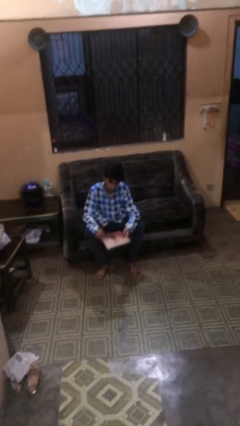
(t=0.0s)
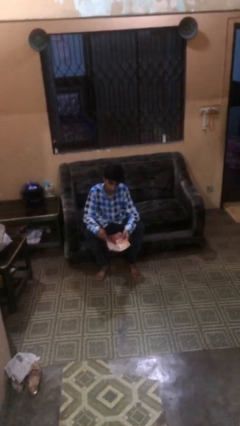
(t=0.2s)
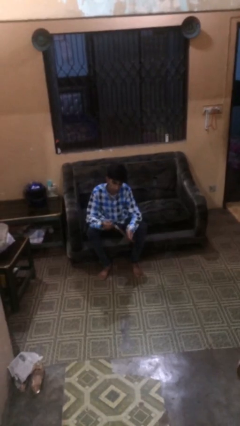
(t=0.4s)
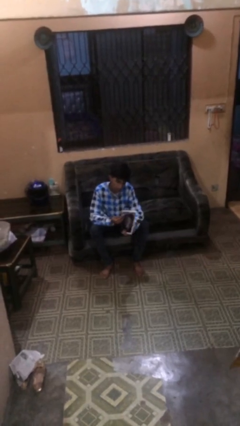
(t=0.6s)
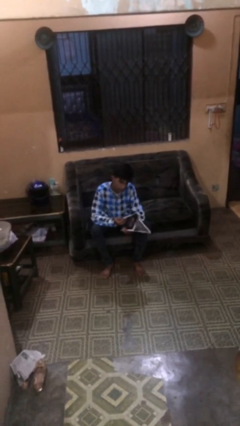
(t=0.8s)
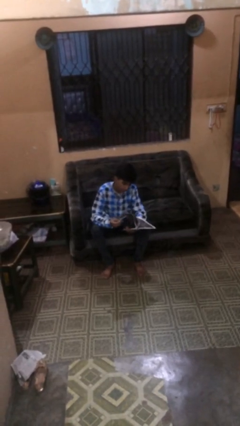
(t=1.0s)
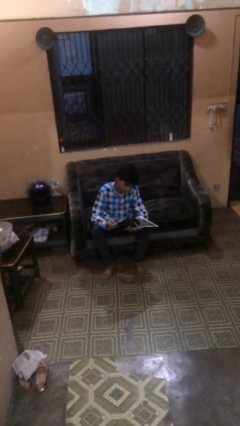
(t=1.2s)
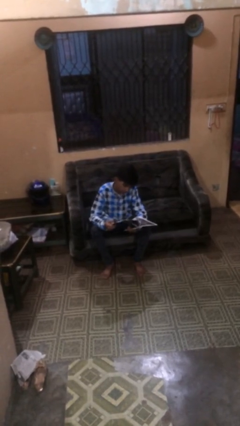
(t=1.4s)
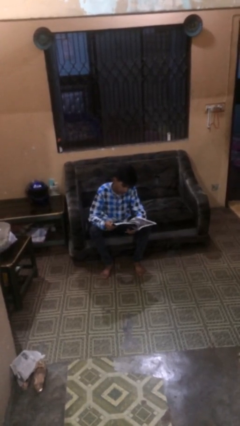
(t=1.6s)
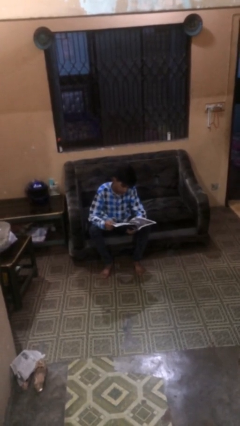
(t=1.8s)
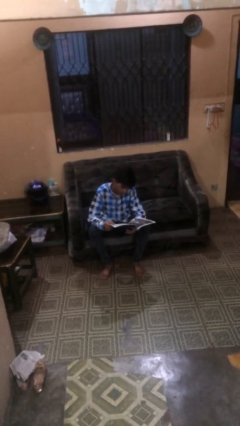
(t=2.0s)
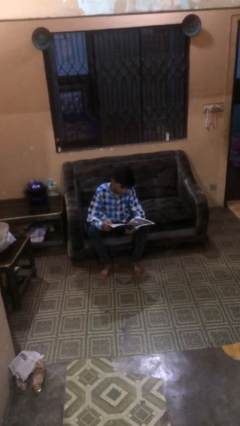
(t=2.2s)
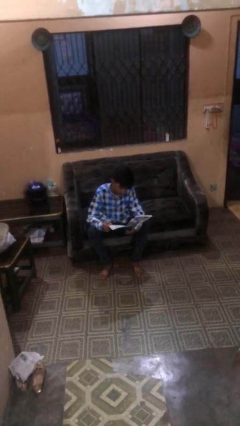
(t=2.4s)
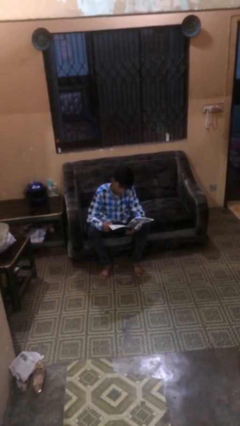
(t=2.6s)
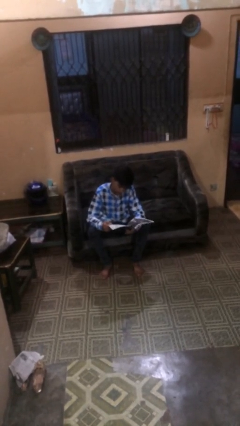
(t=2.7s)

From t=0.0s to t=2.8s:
person reads document

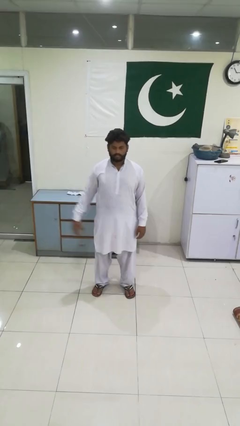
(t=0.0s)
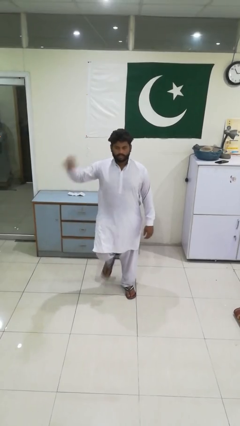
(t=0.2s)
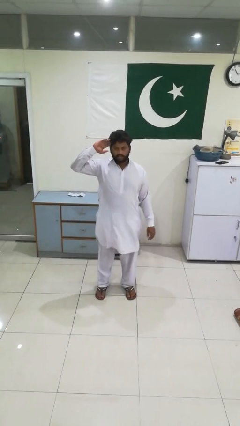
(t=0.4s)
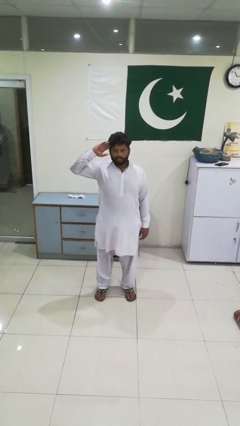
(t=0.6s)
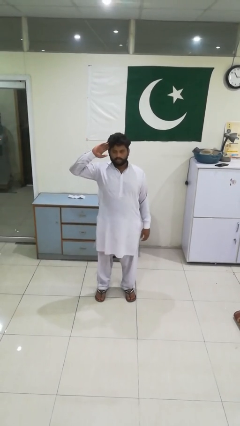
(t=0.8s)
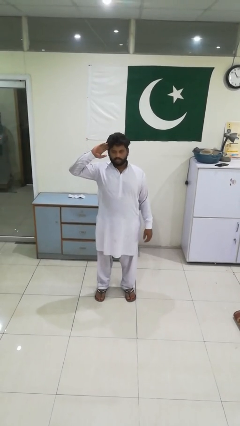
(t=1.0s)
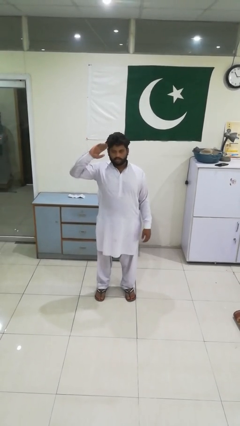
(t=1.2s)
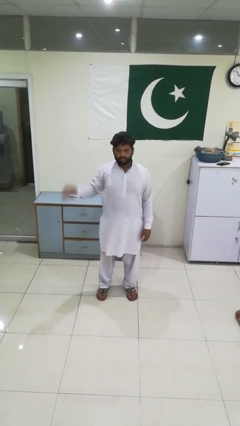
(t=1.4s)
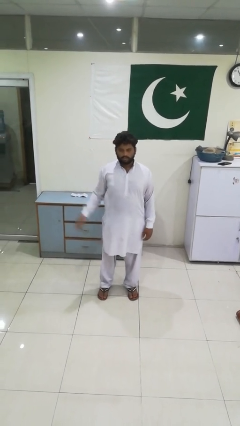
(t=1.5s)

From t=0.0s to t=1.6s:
person salutes

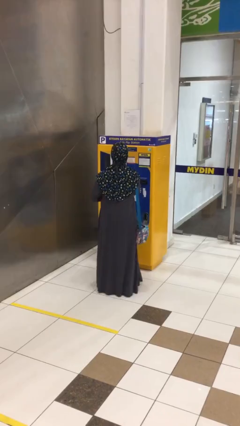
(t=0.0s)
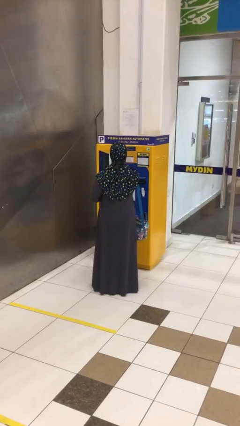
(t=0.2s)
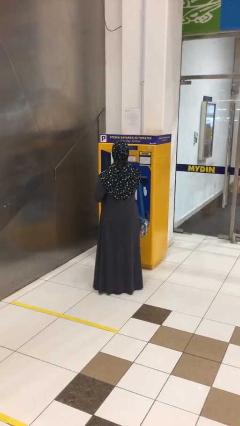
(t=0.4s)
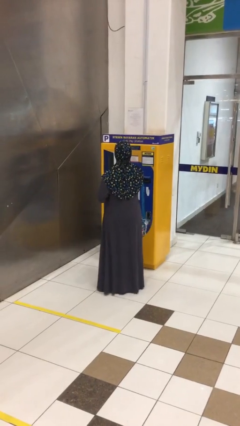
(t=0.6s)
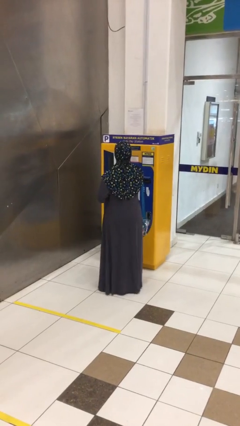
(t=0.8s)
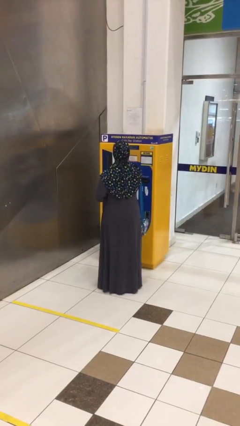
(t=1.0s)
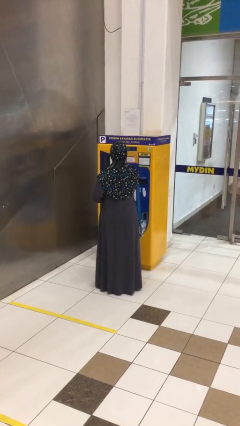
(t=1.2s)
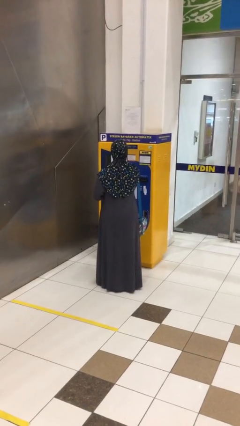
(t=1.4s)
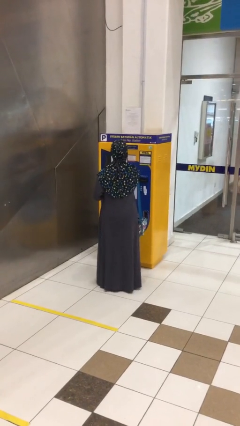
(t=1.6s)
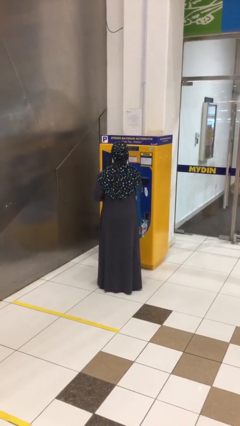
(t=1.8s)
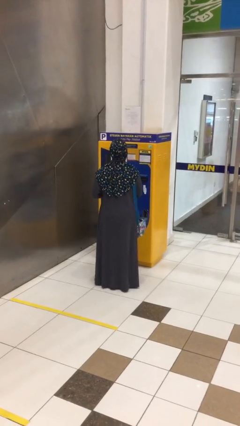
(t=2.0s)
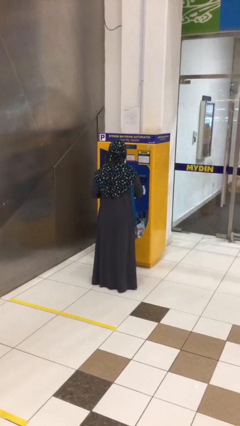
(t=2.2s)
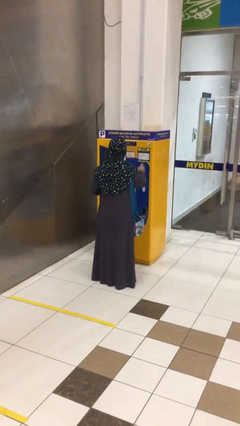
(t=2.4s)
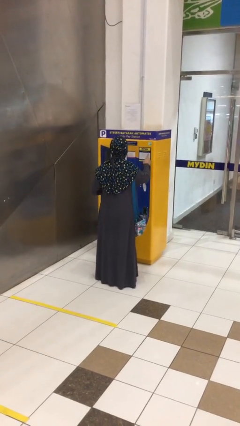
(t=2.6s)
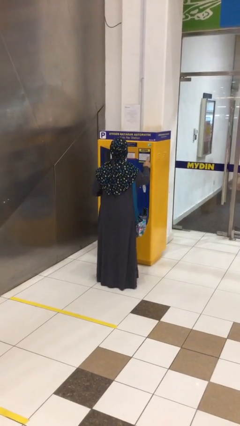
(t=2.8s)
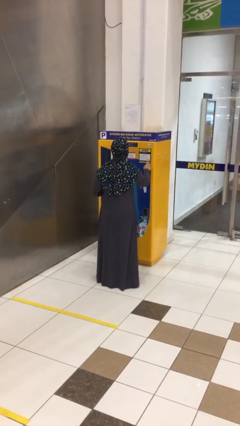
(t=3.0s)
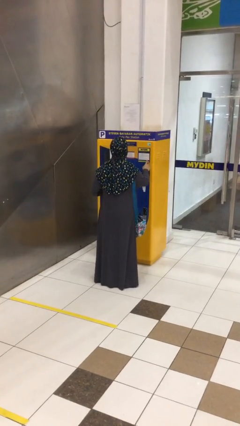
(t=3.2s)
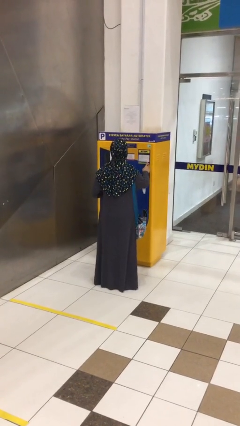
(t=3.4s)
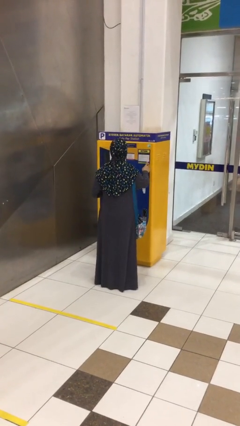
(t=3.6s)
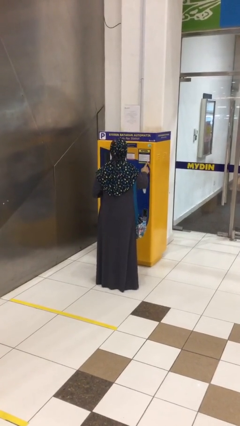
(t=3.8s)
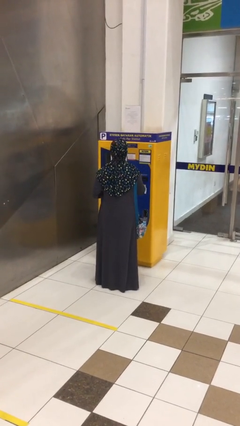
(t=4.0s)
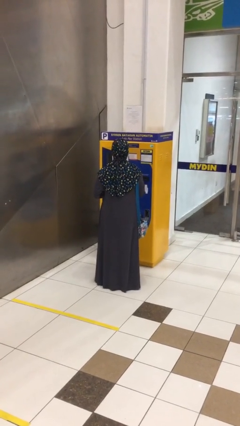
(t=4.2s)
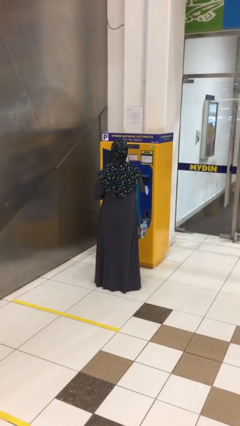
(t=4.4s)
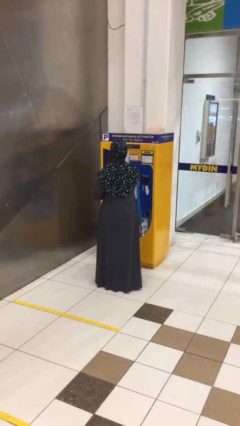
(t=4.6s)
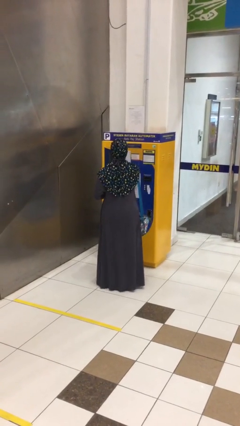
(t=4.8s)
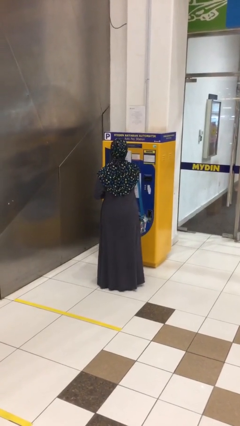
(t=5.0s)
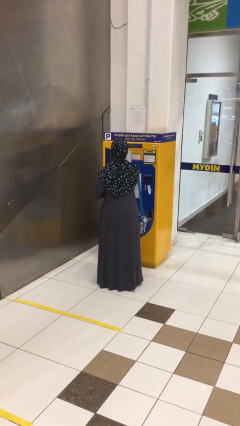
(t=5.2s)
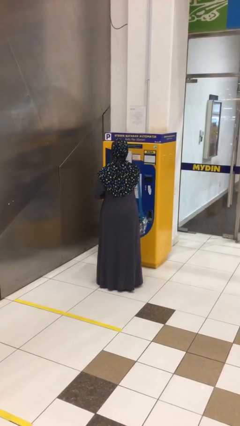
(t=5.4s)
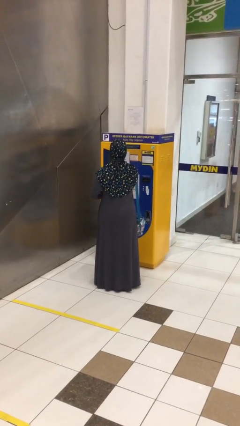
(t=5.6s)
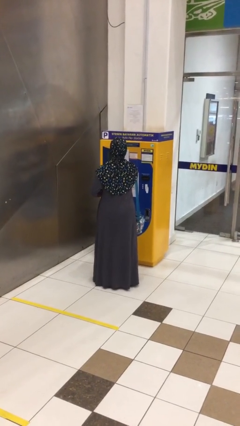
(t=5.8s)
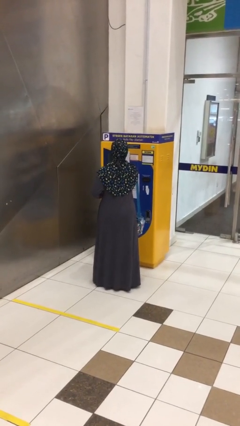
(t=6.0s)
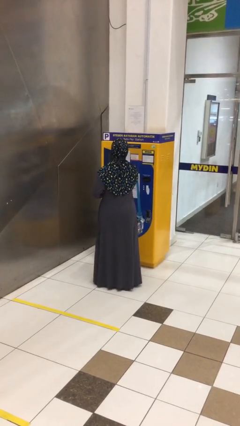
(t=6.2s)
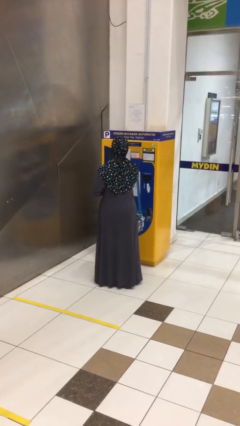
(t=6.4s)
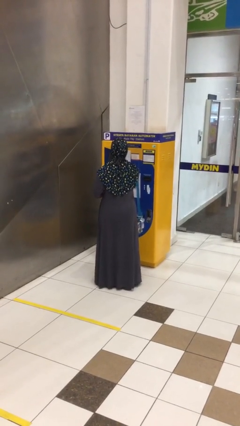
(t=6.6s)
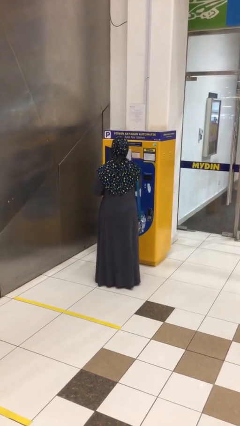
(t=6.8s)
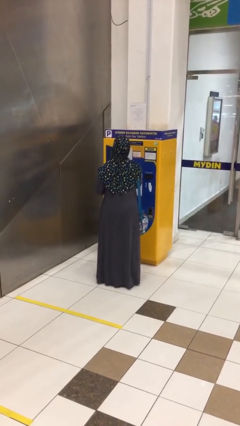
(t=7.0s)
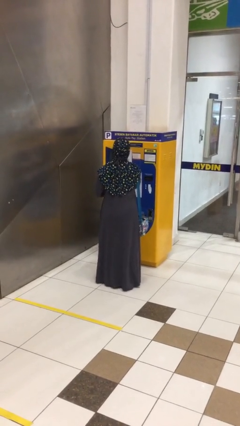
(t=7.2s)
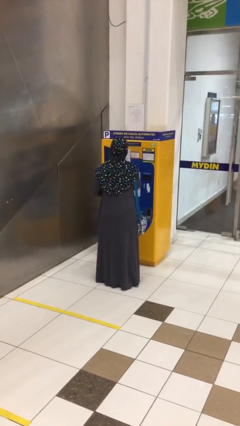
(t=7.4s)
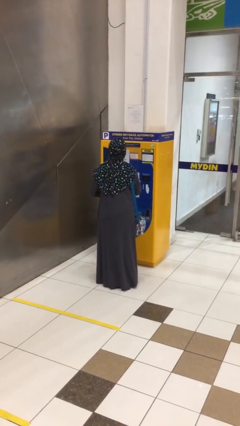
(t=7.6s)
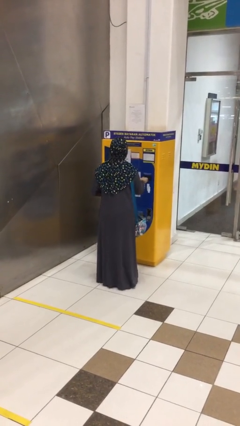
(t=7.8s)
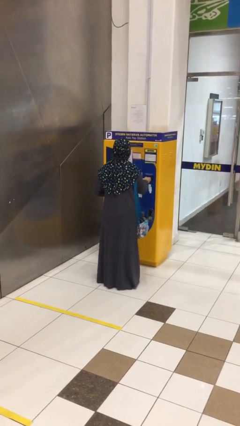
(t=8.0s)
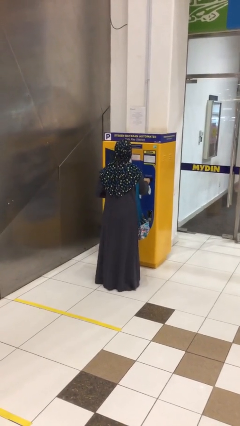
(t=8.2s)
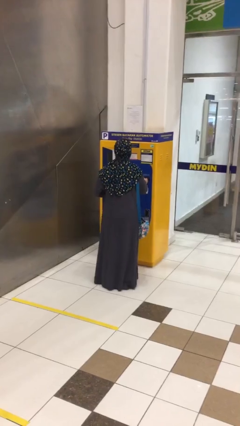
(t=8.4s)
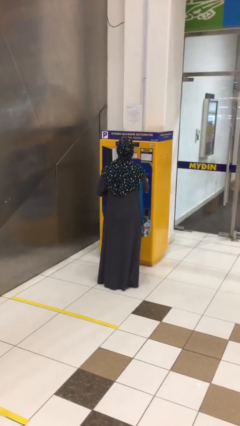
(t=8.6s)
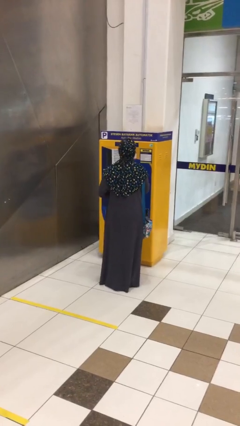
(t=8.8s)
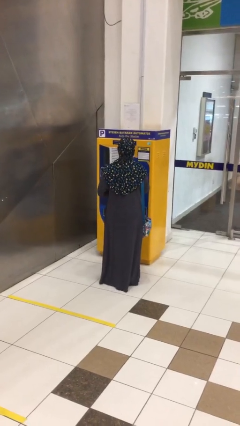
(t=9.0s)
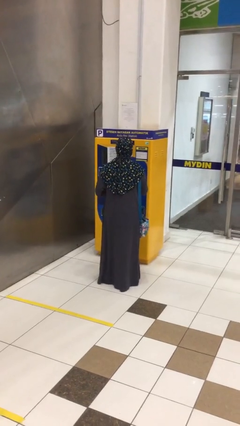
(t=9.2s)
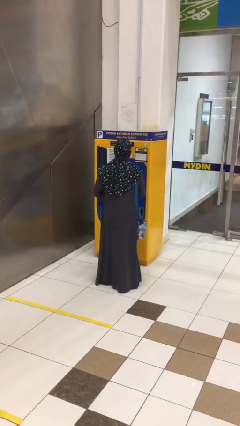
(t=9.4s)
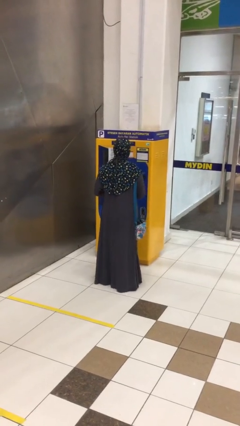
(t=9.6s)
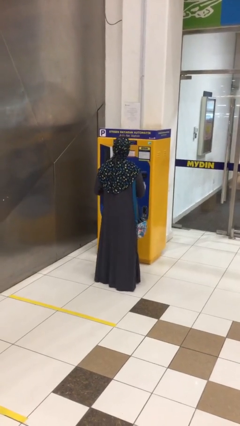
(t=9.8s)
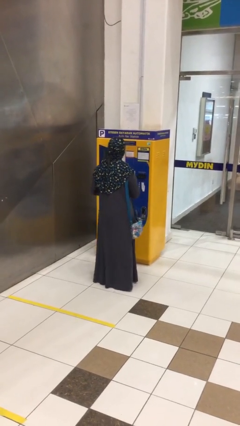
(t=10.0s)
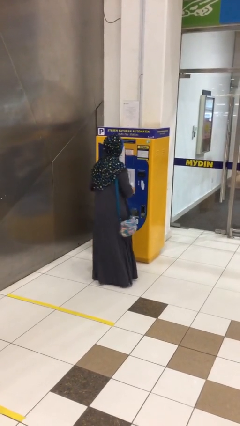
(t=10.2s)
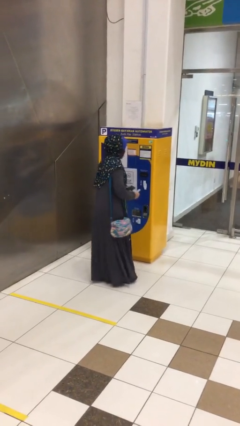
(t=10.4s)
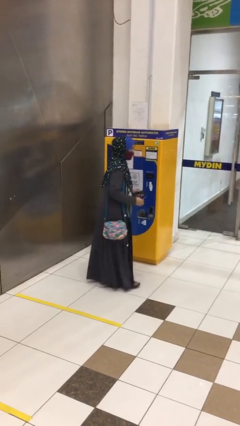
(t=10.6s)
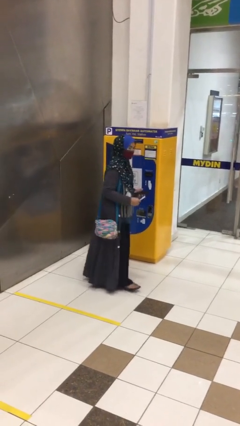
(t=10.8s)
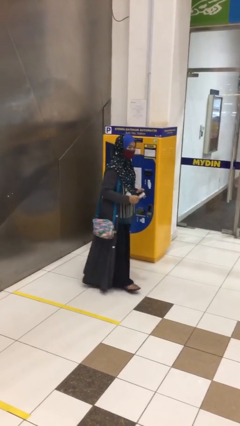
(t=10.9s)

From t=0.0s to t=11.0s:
person purchases from machine

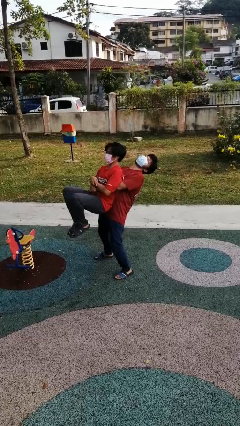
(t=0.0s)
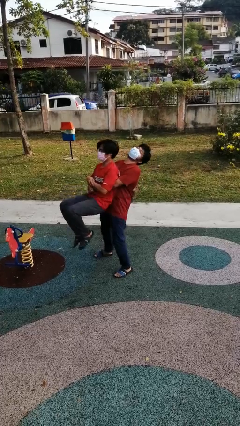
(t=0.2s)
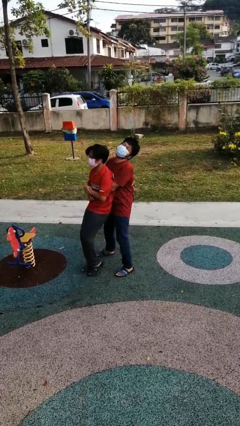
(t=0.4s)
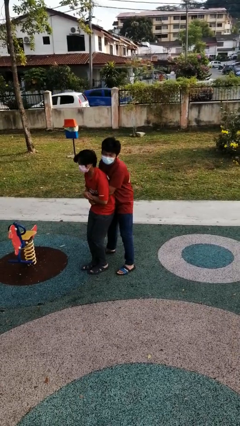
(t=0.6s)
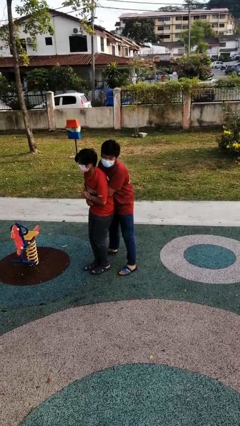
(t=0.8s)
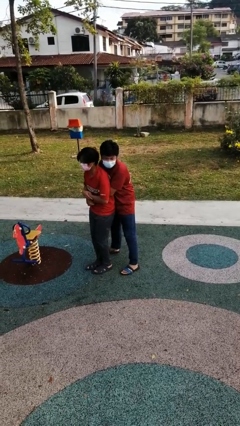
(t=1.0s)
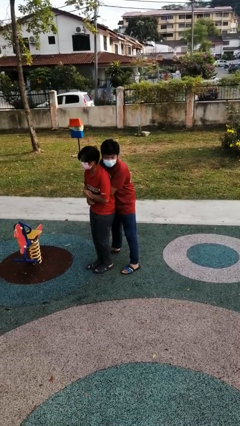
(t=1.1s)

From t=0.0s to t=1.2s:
person puts down person

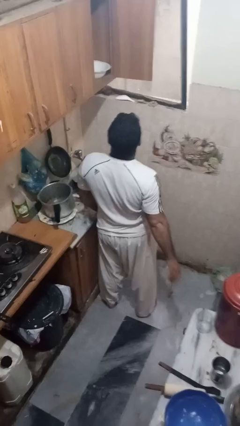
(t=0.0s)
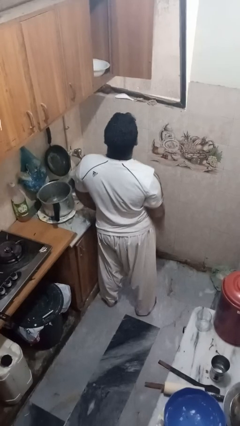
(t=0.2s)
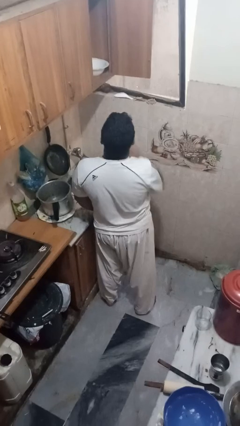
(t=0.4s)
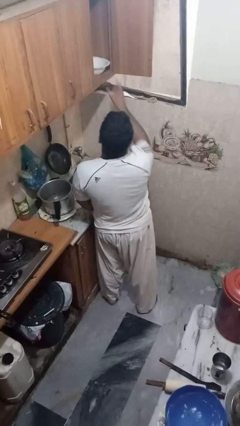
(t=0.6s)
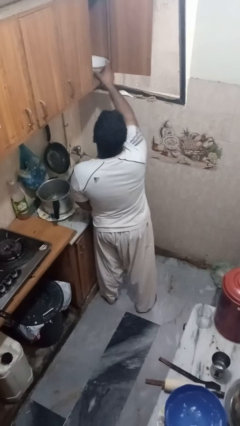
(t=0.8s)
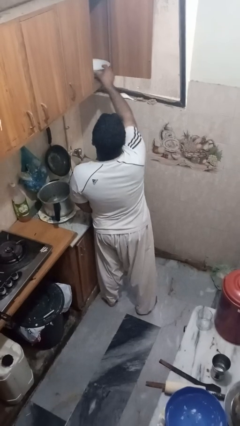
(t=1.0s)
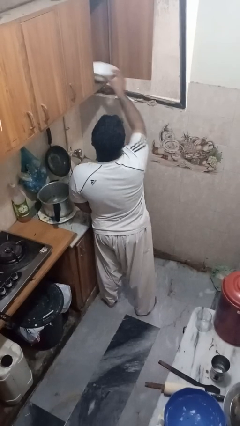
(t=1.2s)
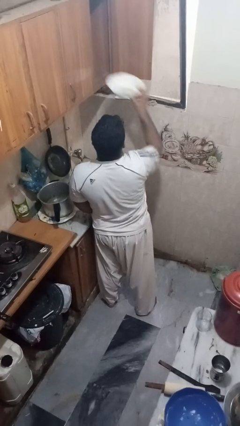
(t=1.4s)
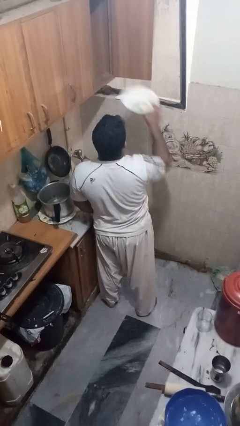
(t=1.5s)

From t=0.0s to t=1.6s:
person takes object from cabinet
